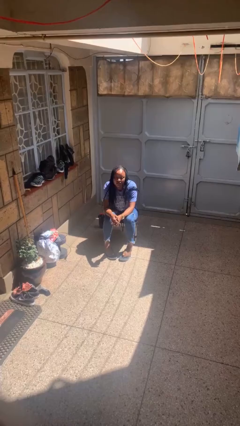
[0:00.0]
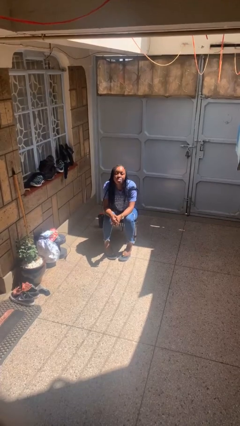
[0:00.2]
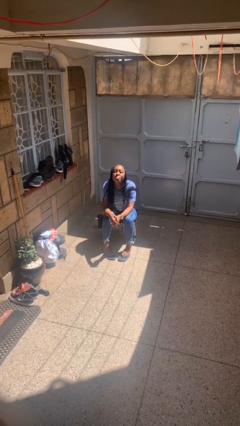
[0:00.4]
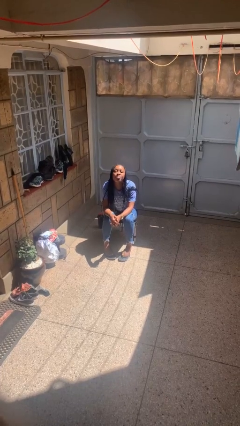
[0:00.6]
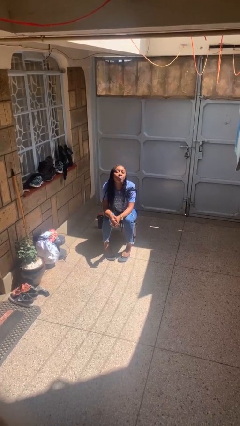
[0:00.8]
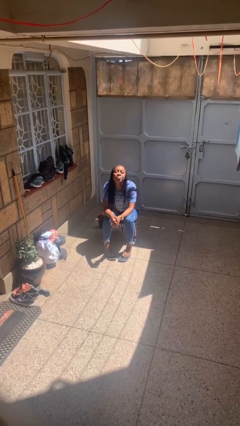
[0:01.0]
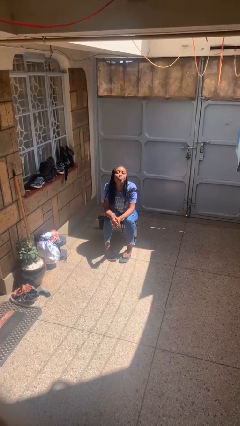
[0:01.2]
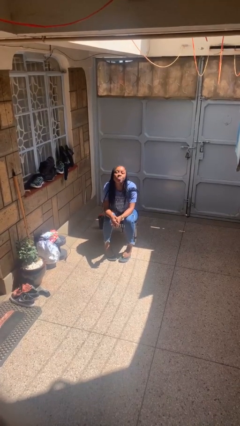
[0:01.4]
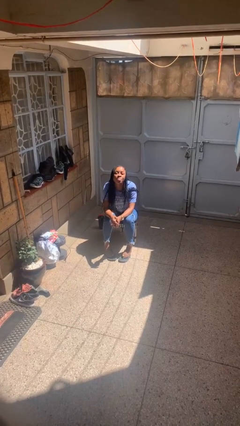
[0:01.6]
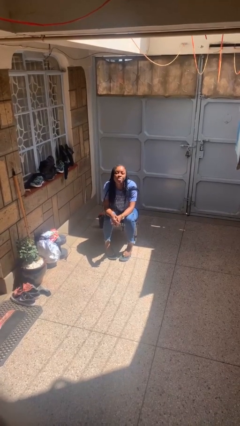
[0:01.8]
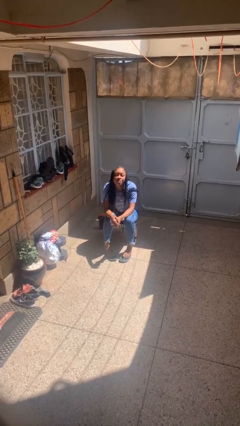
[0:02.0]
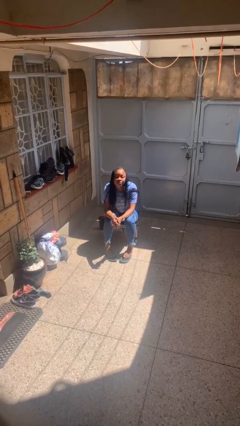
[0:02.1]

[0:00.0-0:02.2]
person sticks out tongue

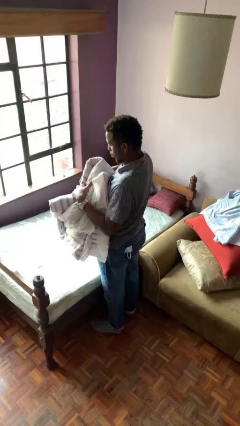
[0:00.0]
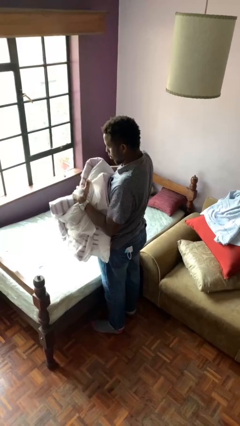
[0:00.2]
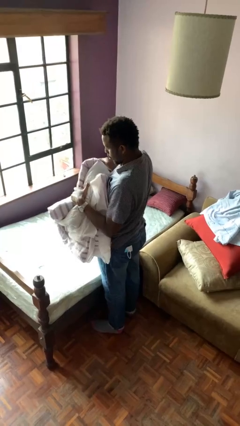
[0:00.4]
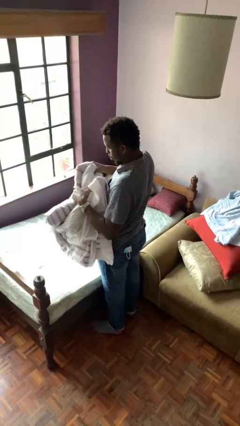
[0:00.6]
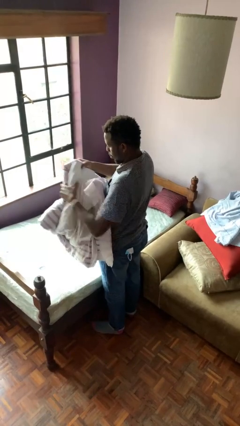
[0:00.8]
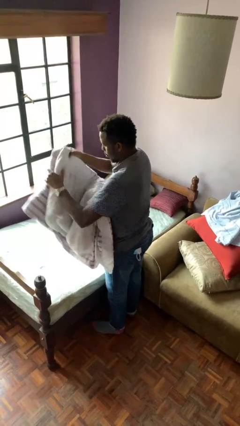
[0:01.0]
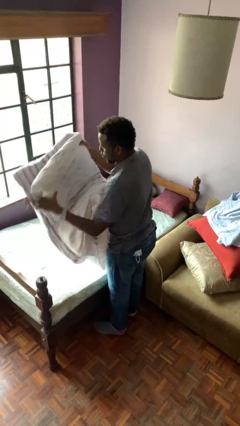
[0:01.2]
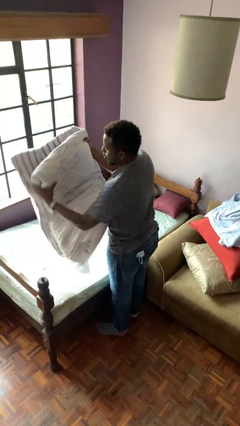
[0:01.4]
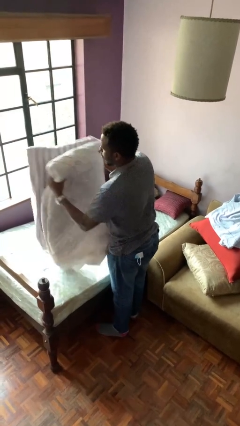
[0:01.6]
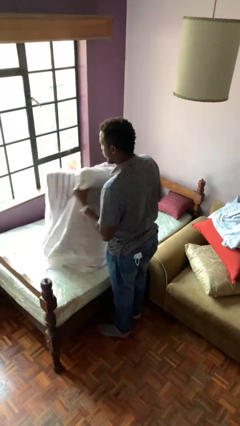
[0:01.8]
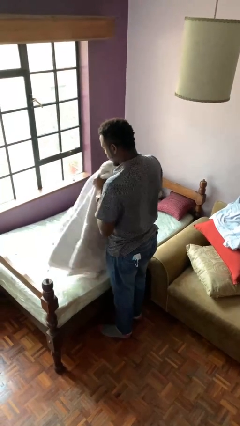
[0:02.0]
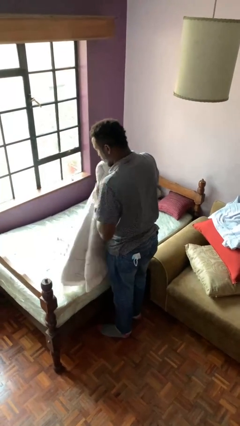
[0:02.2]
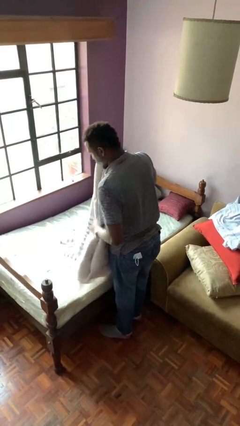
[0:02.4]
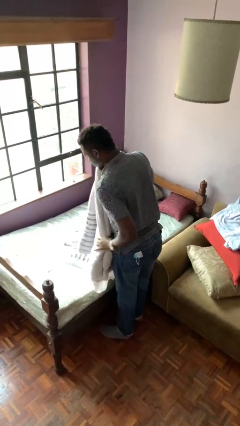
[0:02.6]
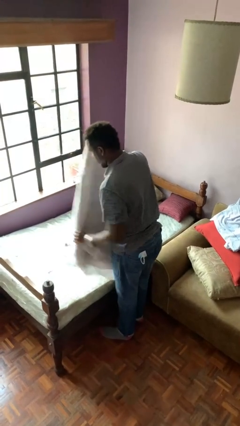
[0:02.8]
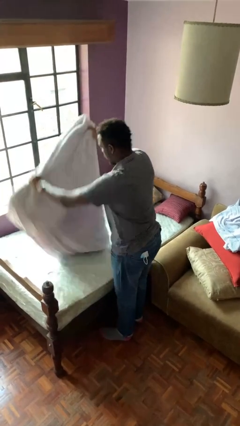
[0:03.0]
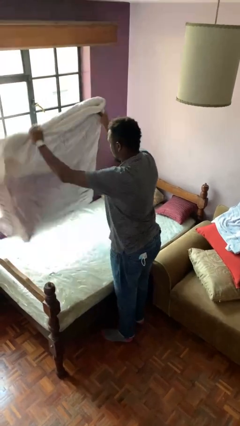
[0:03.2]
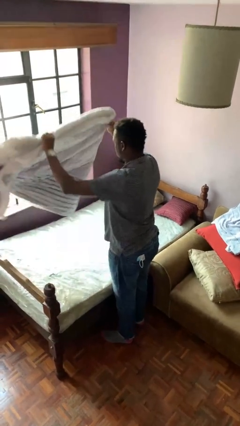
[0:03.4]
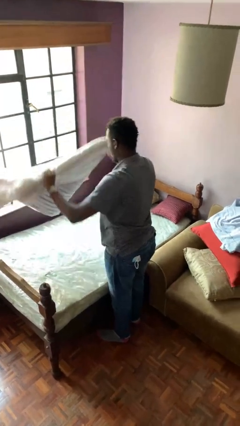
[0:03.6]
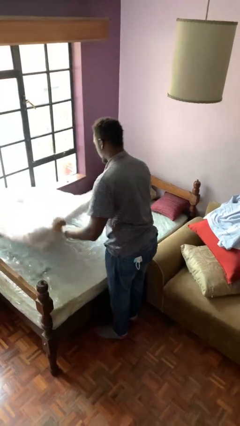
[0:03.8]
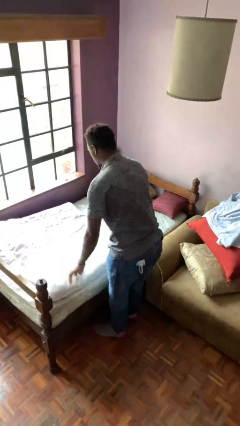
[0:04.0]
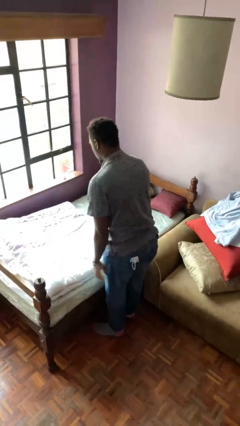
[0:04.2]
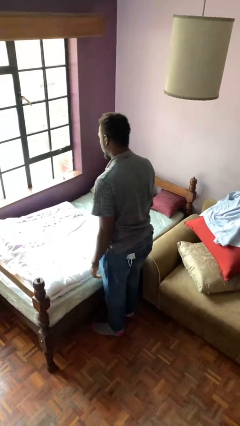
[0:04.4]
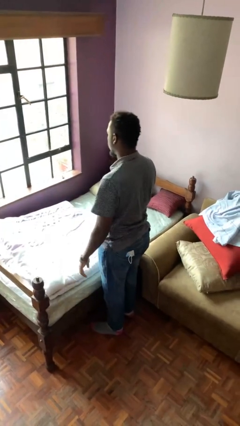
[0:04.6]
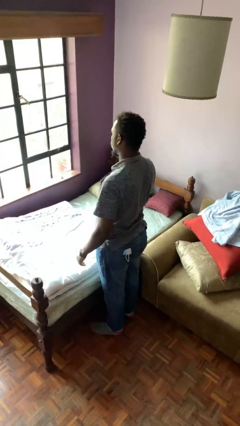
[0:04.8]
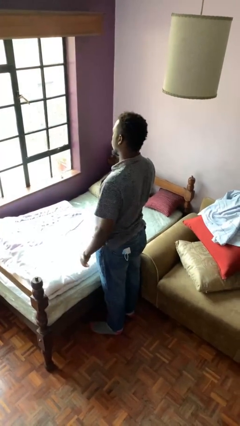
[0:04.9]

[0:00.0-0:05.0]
person unfolds blanket

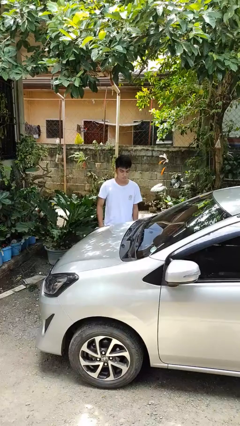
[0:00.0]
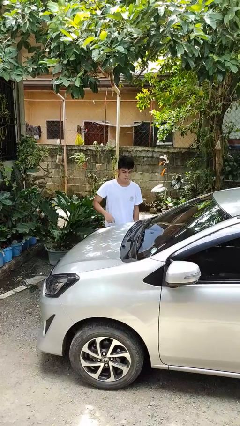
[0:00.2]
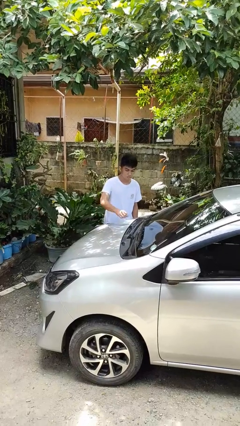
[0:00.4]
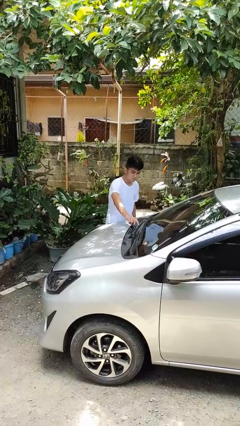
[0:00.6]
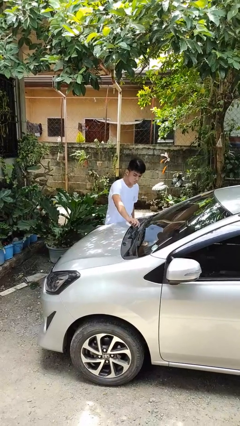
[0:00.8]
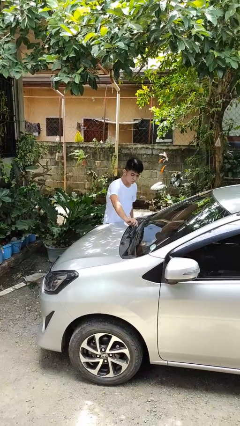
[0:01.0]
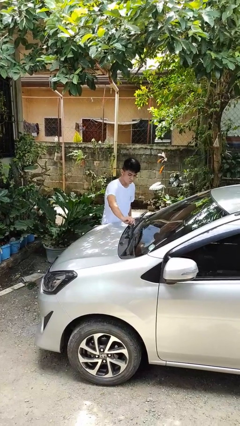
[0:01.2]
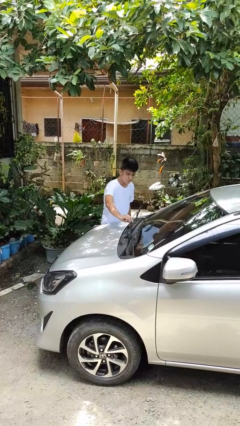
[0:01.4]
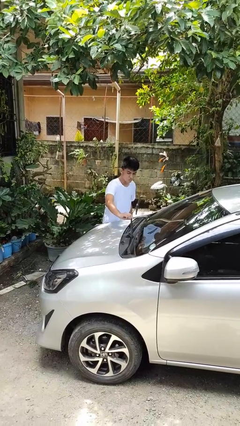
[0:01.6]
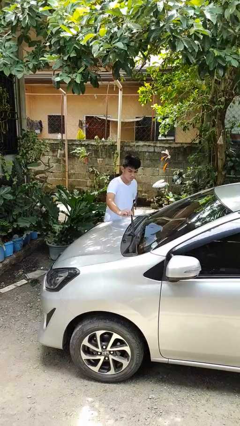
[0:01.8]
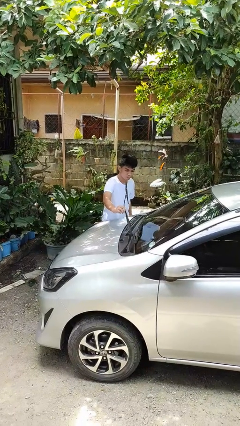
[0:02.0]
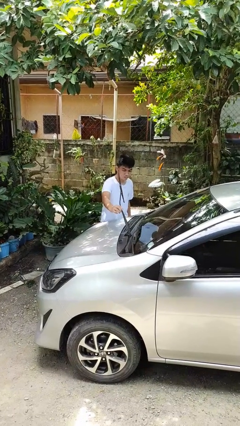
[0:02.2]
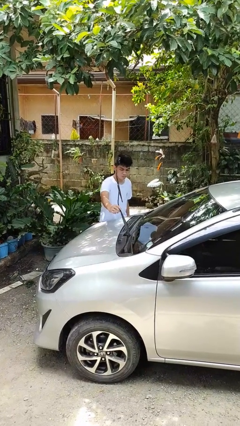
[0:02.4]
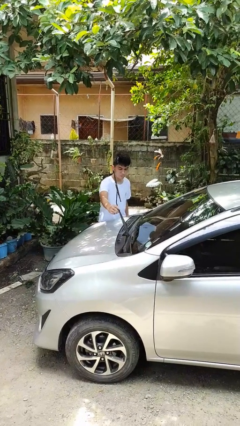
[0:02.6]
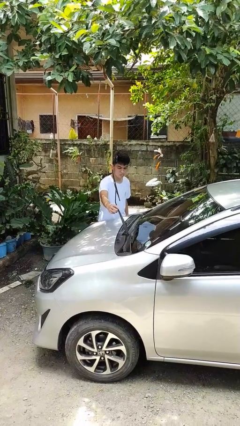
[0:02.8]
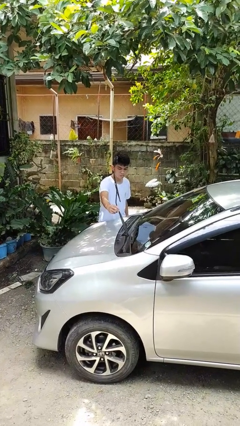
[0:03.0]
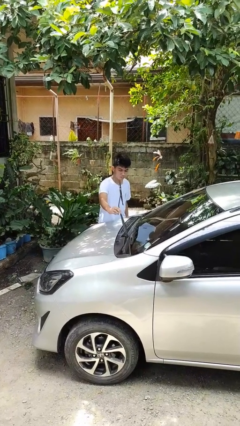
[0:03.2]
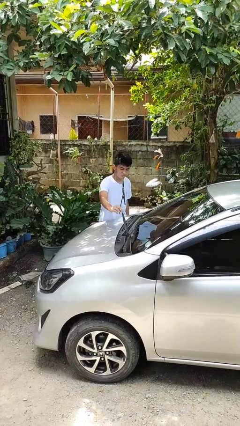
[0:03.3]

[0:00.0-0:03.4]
person flips up car wipers

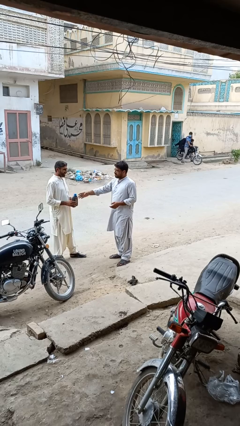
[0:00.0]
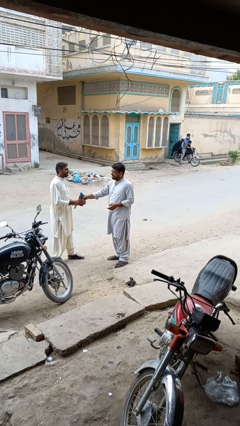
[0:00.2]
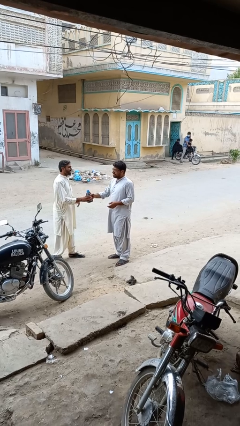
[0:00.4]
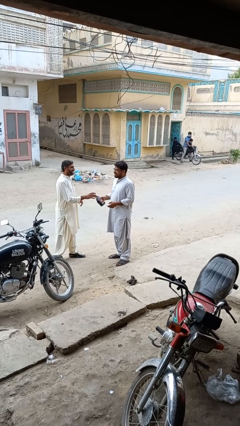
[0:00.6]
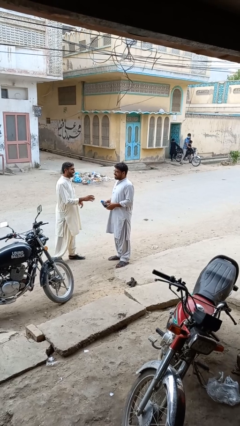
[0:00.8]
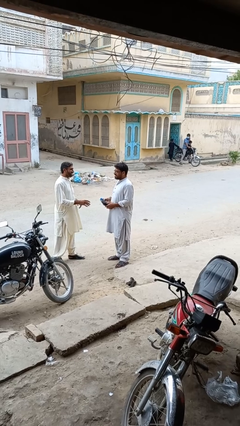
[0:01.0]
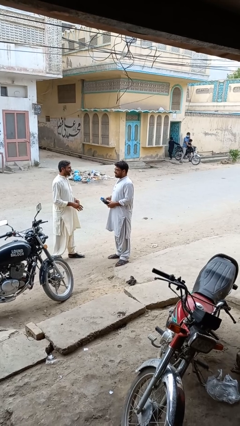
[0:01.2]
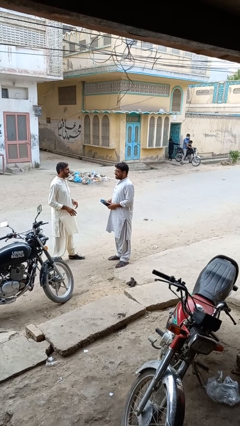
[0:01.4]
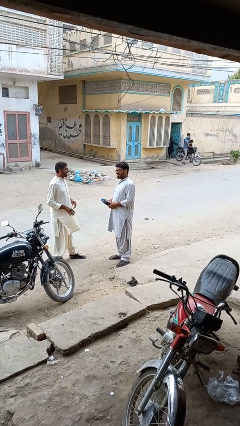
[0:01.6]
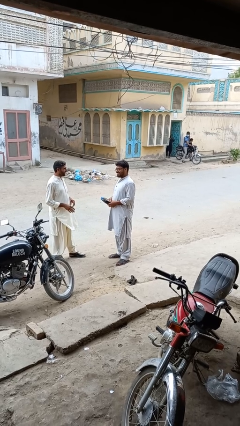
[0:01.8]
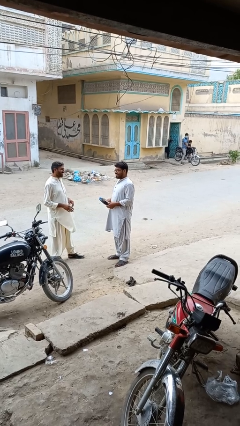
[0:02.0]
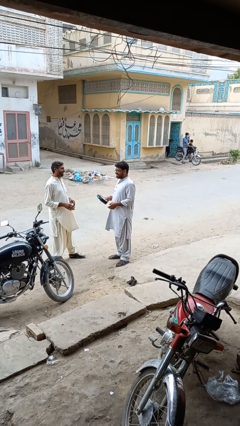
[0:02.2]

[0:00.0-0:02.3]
person transfers object to person

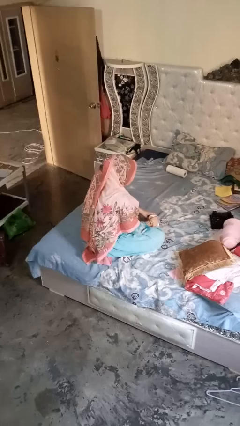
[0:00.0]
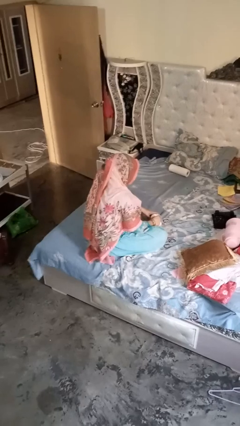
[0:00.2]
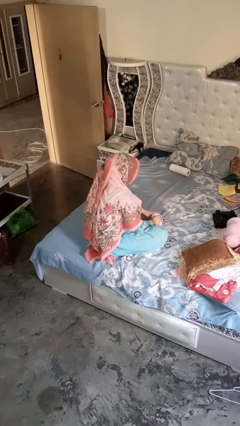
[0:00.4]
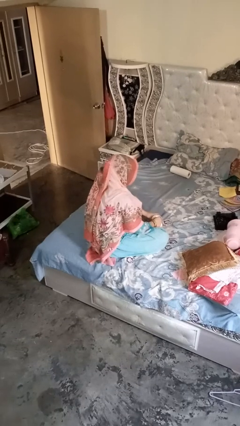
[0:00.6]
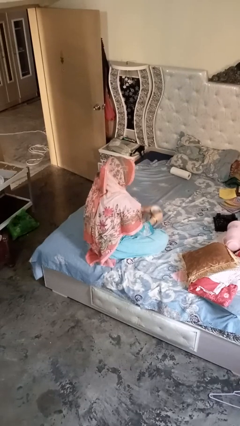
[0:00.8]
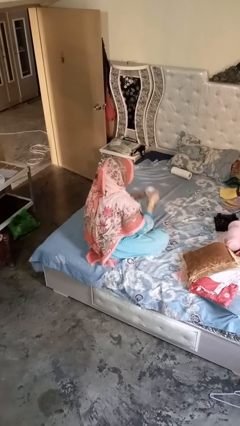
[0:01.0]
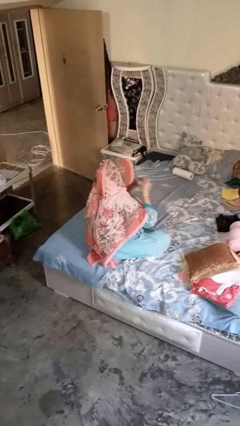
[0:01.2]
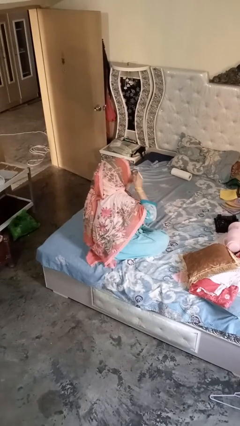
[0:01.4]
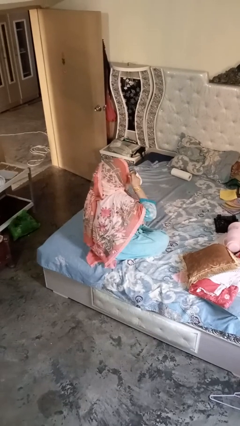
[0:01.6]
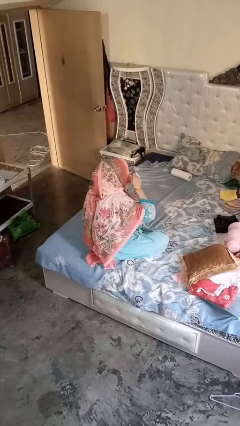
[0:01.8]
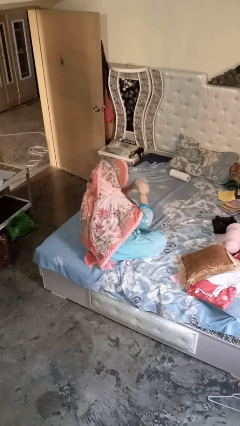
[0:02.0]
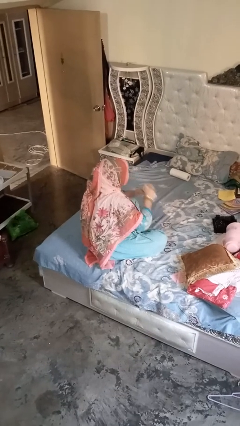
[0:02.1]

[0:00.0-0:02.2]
person drinks from mug

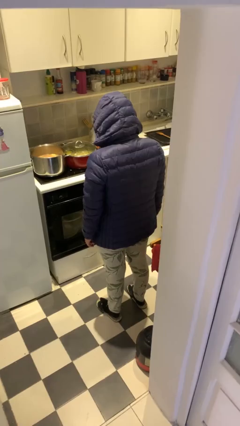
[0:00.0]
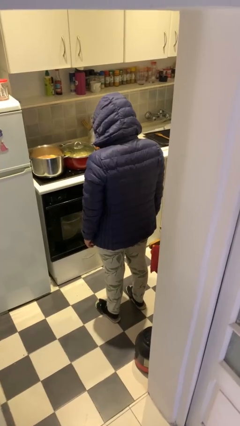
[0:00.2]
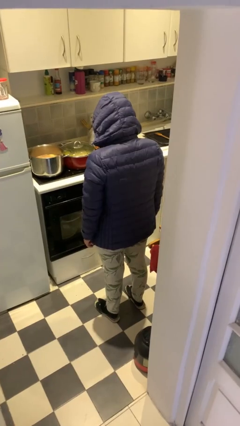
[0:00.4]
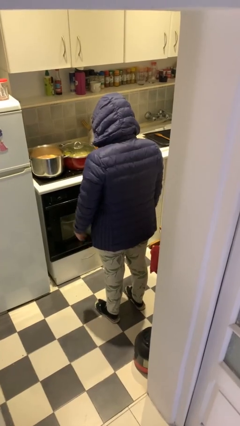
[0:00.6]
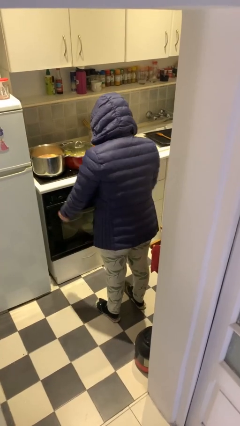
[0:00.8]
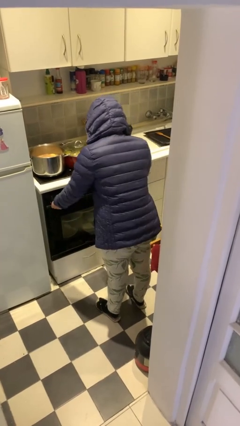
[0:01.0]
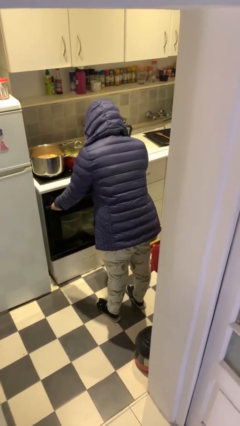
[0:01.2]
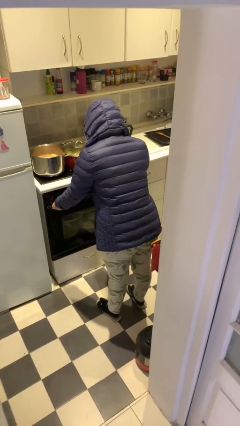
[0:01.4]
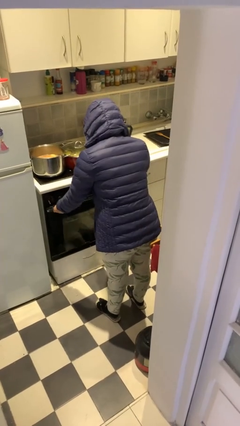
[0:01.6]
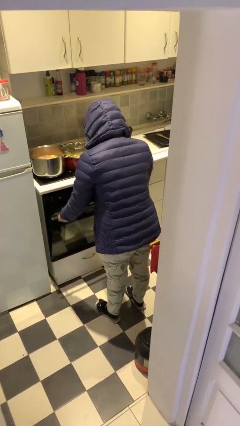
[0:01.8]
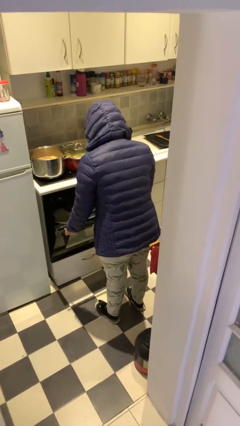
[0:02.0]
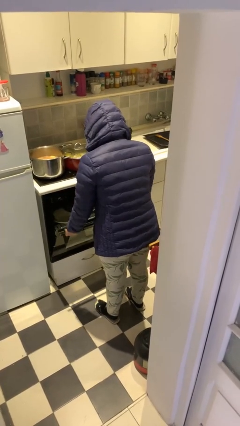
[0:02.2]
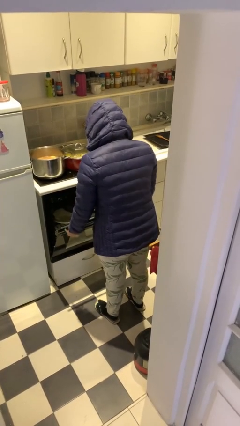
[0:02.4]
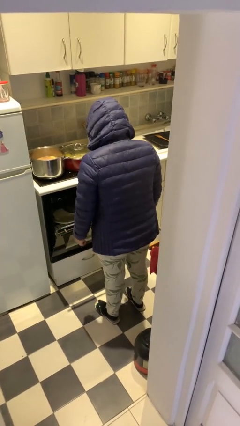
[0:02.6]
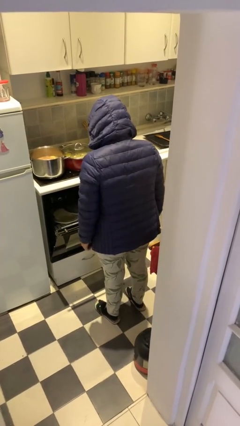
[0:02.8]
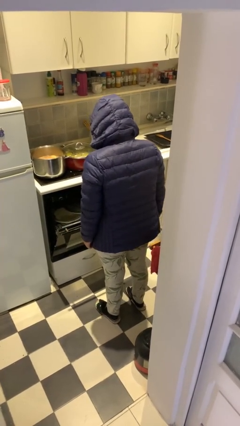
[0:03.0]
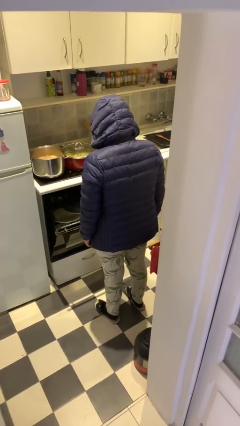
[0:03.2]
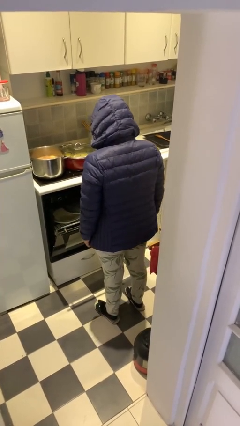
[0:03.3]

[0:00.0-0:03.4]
person opens dishwasher
